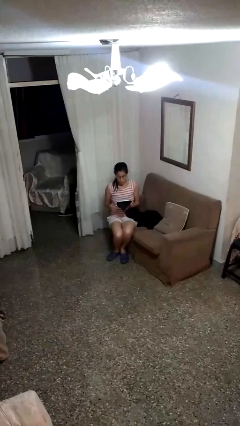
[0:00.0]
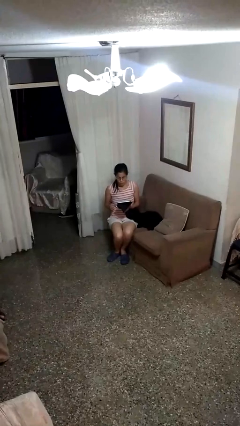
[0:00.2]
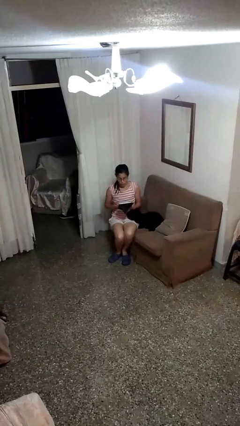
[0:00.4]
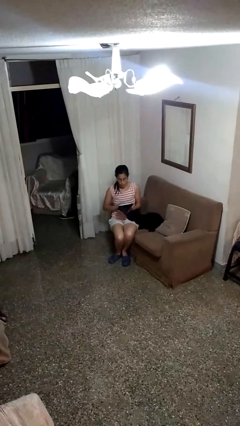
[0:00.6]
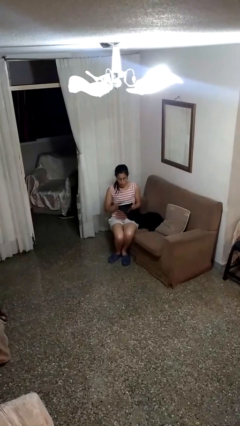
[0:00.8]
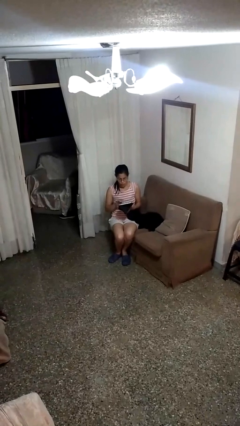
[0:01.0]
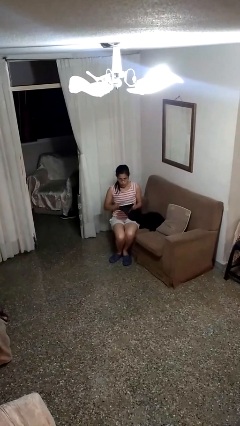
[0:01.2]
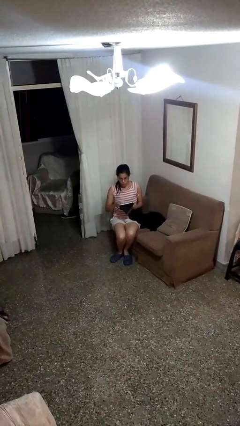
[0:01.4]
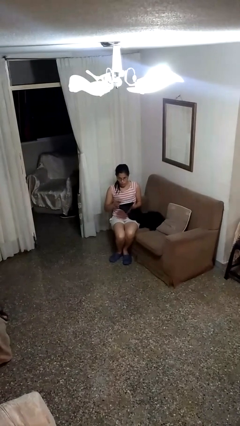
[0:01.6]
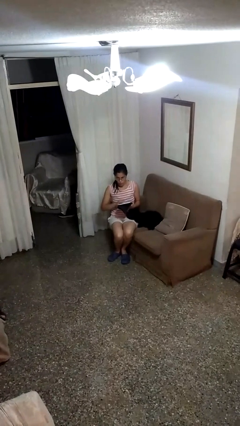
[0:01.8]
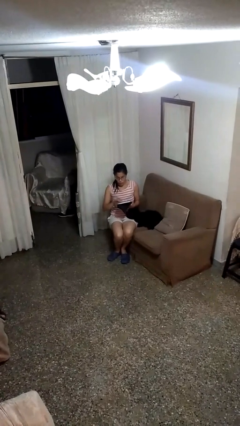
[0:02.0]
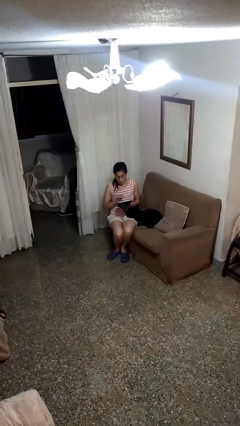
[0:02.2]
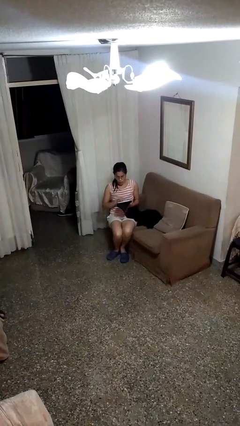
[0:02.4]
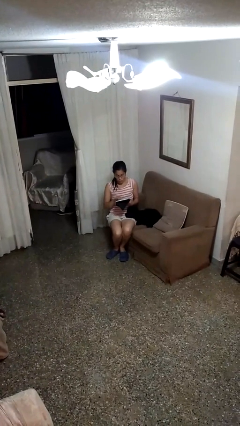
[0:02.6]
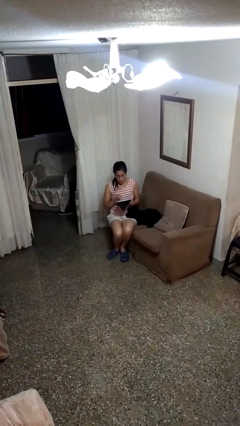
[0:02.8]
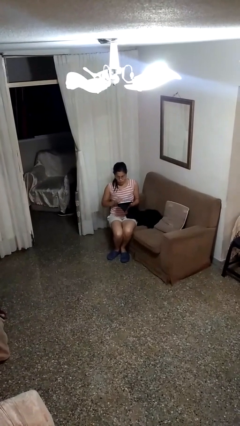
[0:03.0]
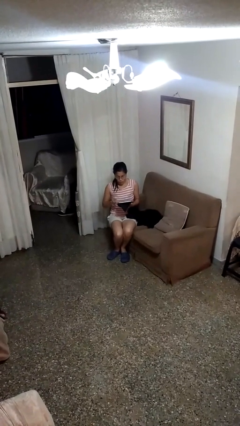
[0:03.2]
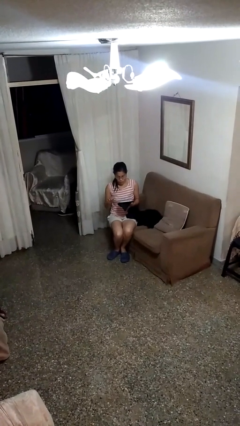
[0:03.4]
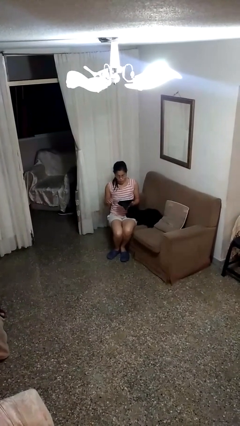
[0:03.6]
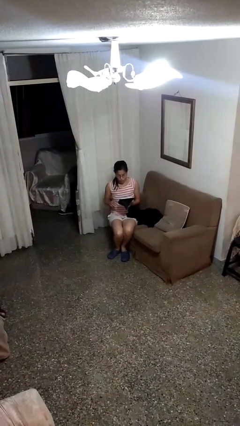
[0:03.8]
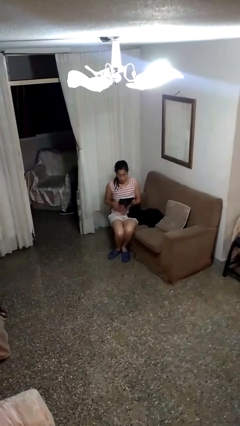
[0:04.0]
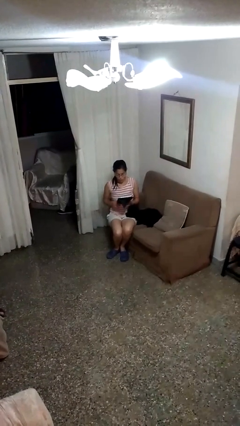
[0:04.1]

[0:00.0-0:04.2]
person interacts with tablet

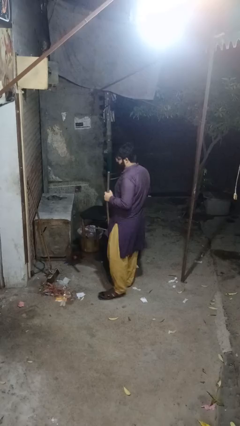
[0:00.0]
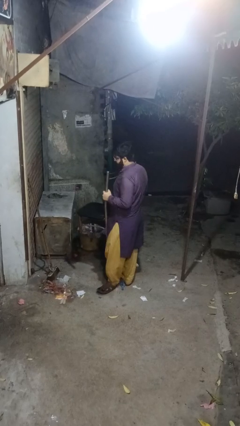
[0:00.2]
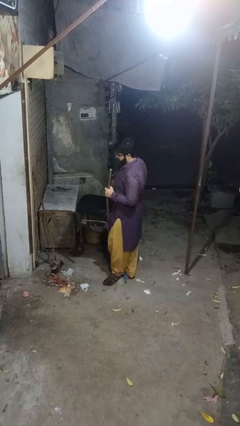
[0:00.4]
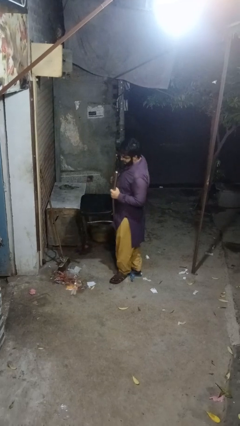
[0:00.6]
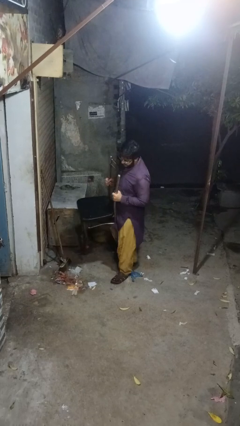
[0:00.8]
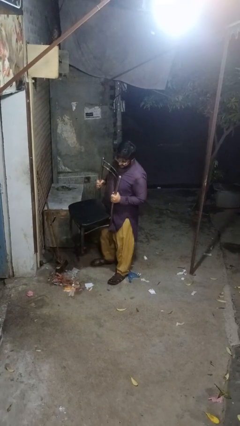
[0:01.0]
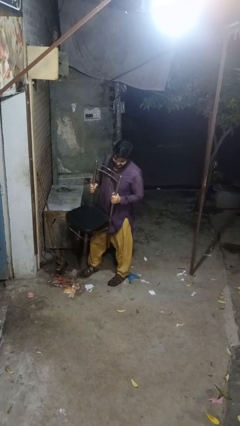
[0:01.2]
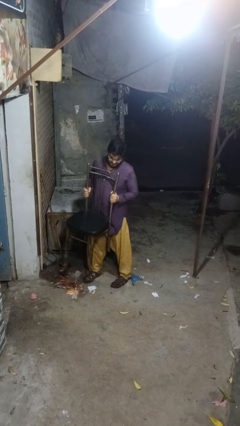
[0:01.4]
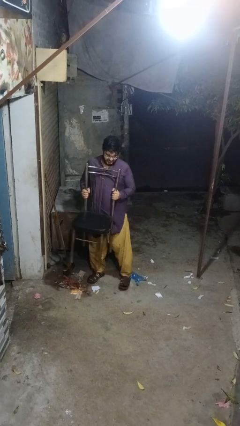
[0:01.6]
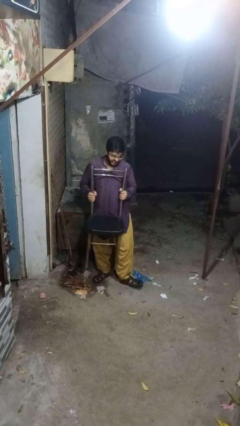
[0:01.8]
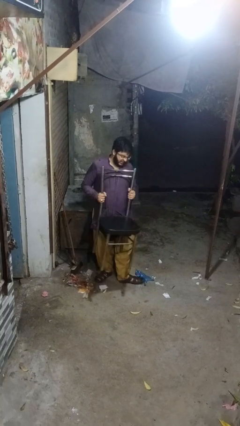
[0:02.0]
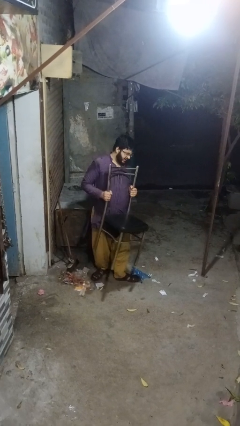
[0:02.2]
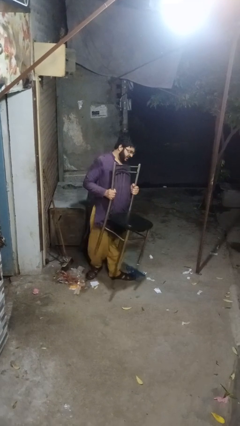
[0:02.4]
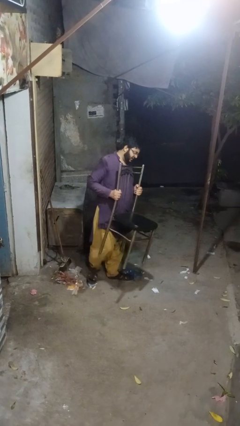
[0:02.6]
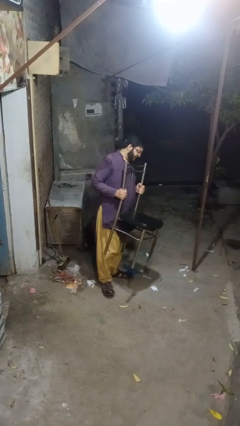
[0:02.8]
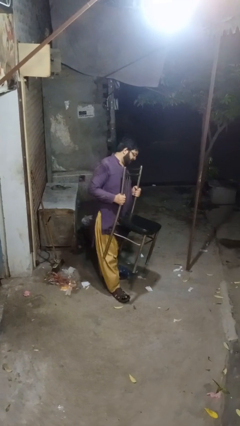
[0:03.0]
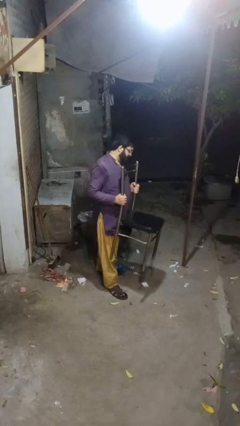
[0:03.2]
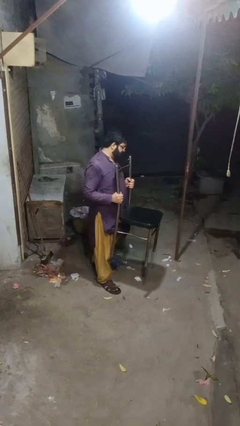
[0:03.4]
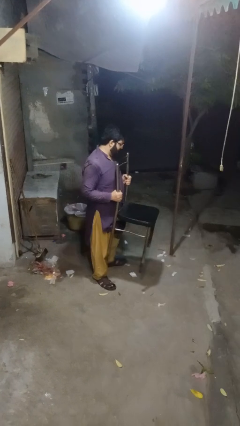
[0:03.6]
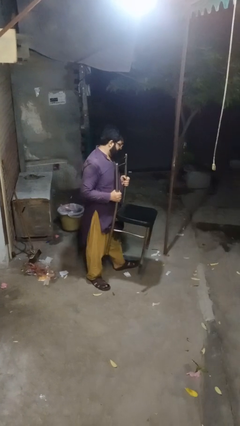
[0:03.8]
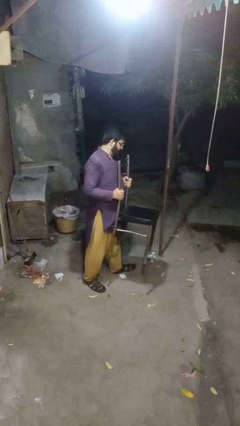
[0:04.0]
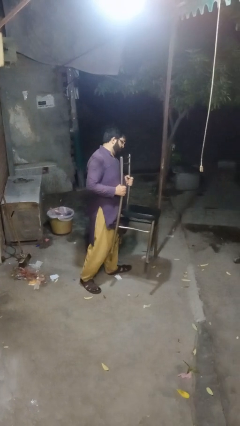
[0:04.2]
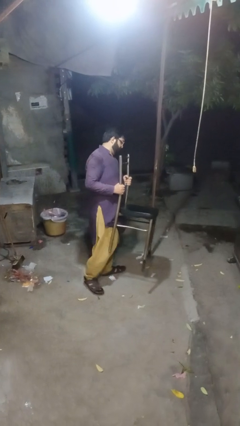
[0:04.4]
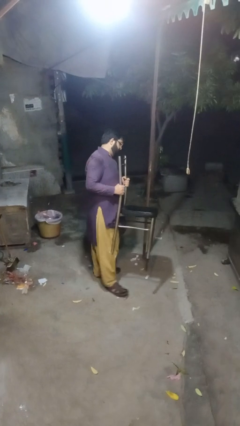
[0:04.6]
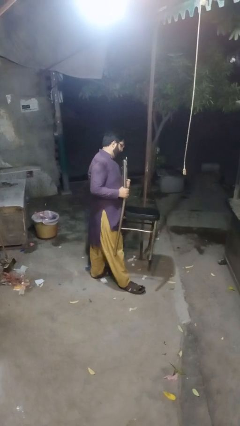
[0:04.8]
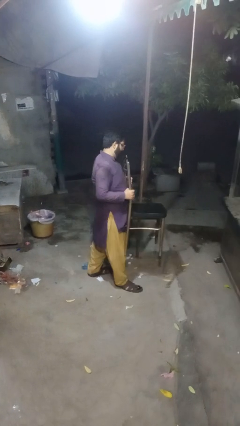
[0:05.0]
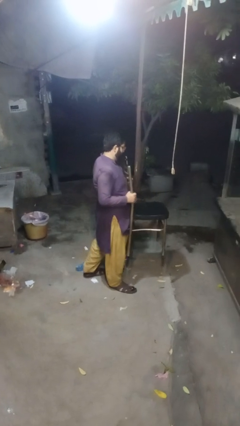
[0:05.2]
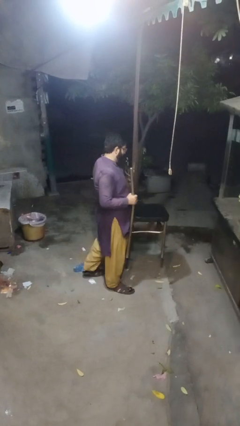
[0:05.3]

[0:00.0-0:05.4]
person carries furniture

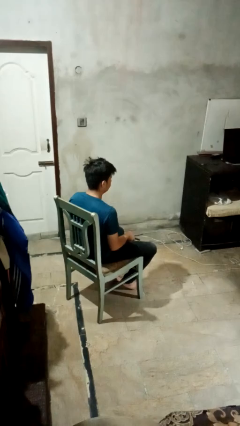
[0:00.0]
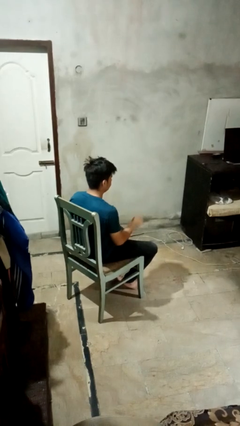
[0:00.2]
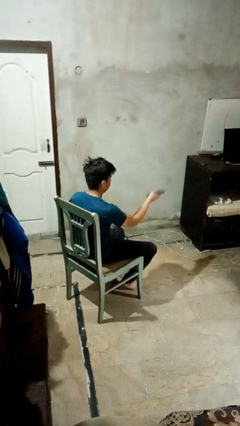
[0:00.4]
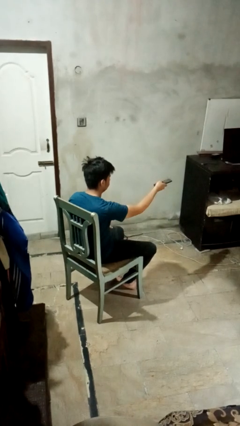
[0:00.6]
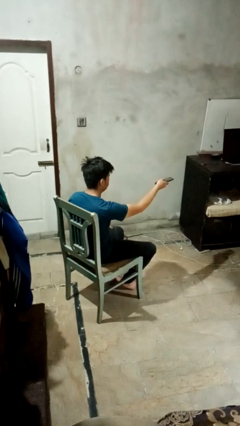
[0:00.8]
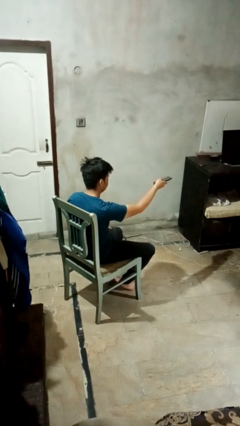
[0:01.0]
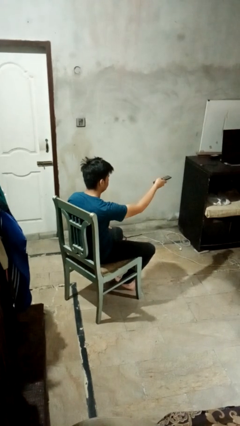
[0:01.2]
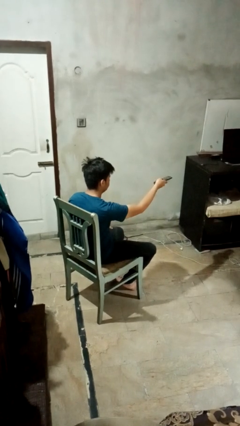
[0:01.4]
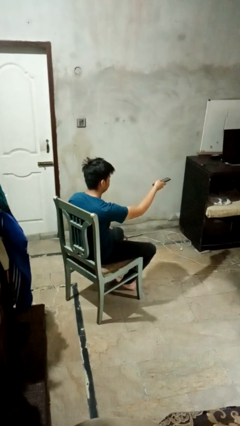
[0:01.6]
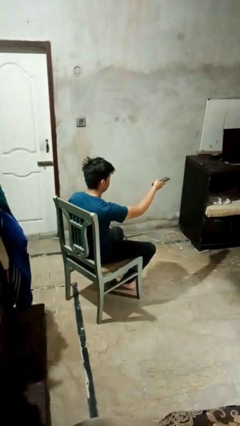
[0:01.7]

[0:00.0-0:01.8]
person uses television remote

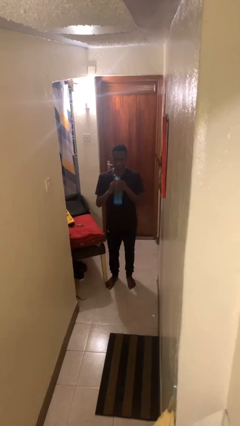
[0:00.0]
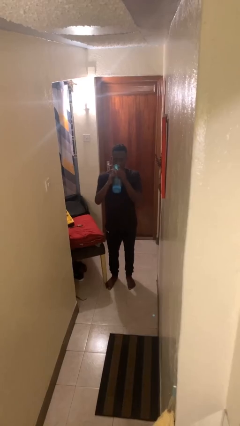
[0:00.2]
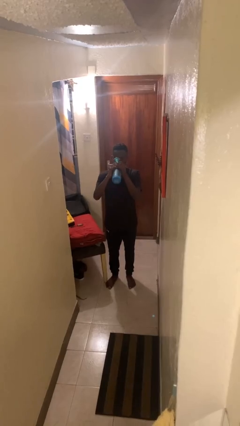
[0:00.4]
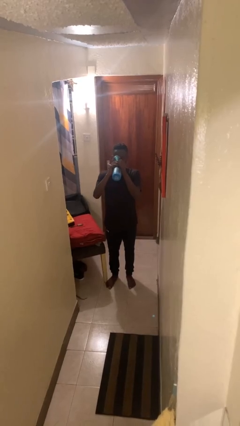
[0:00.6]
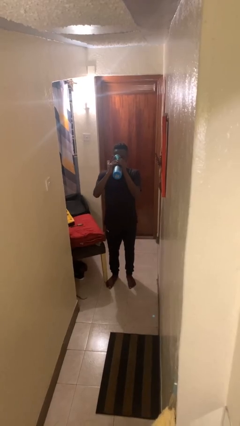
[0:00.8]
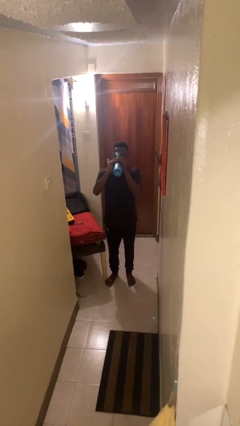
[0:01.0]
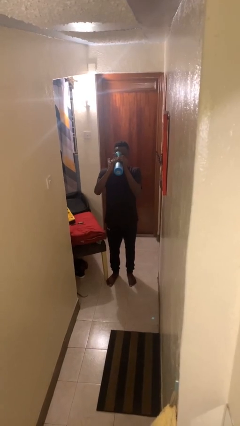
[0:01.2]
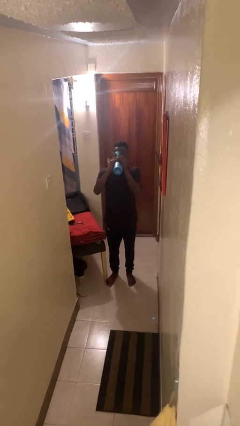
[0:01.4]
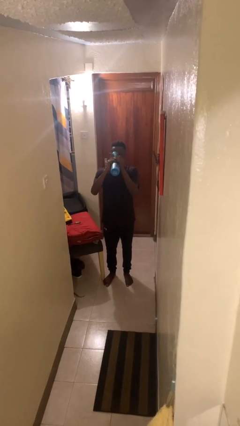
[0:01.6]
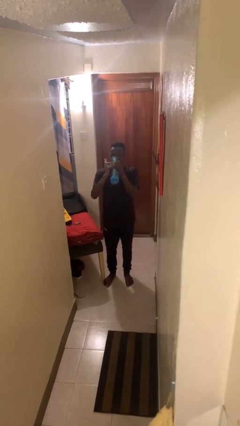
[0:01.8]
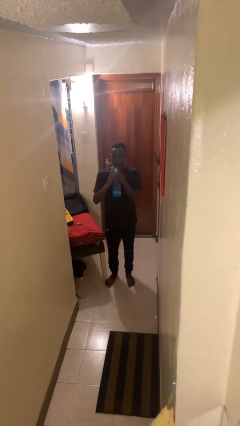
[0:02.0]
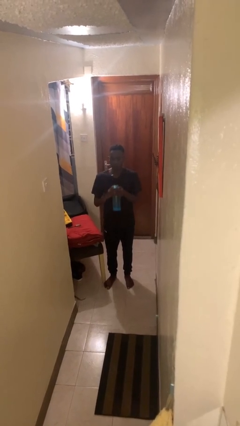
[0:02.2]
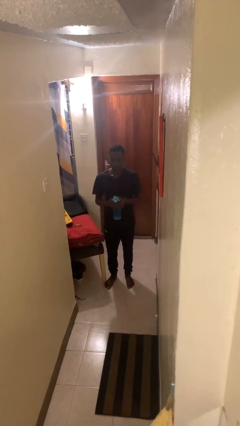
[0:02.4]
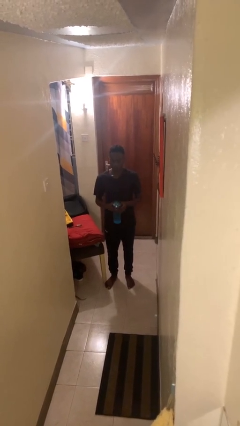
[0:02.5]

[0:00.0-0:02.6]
person drinks from bottle

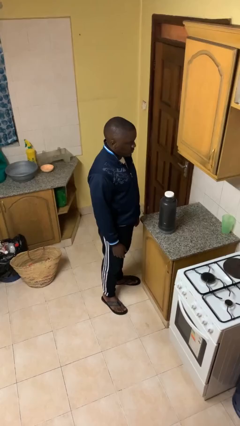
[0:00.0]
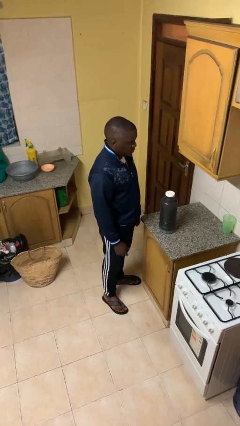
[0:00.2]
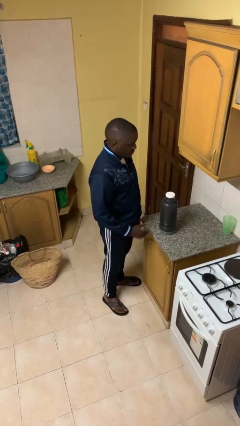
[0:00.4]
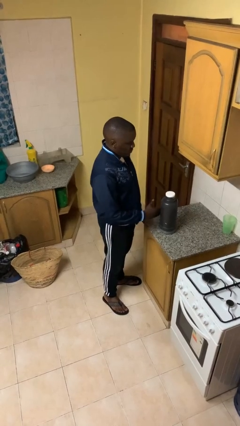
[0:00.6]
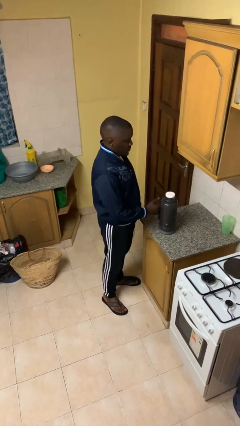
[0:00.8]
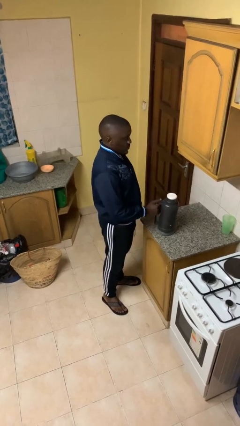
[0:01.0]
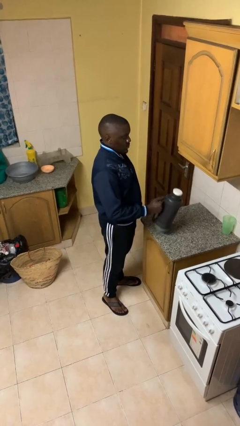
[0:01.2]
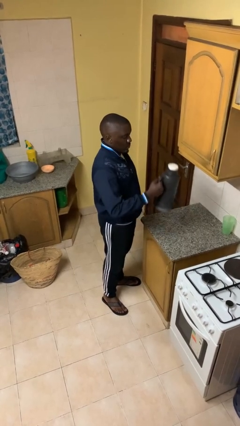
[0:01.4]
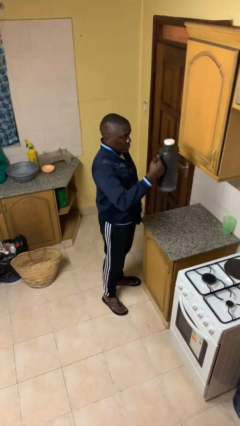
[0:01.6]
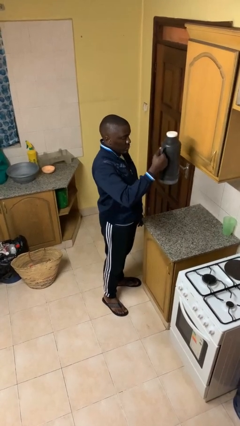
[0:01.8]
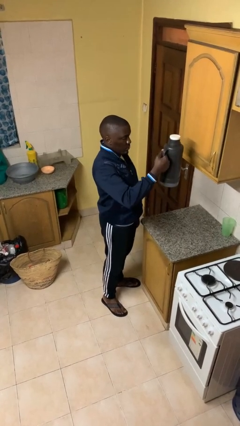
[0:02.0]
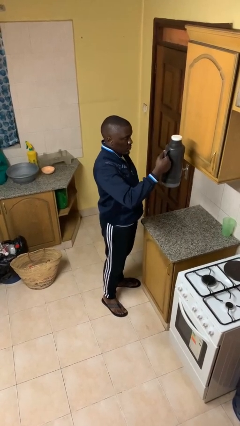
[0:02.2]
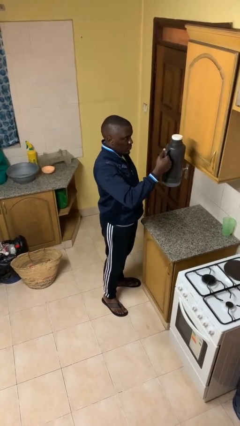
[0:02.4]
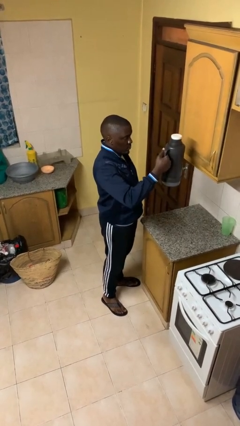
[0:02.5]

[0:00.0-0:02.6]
person picks up object from countertop

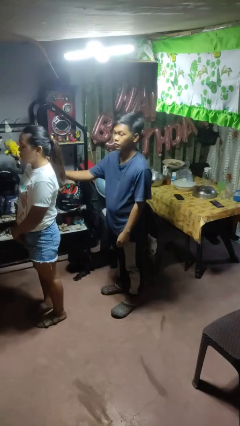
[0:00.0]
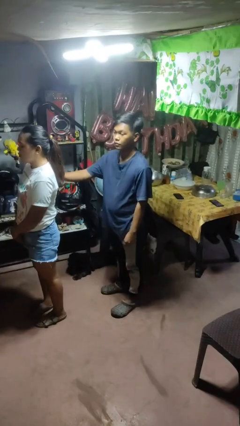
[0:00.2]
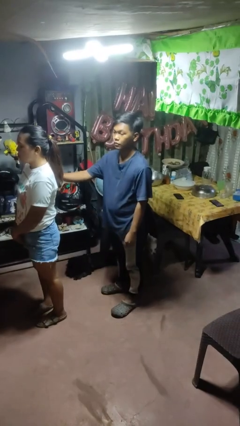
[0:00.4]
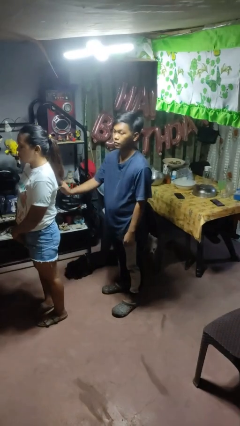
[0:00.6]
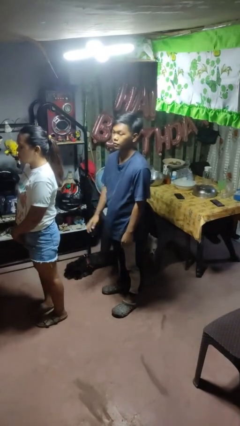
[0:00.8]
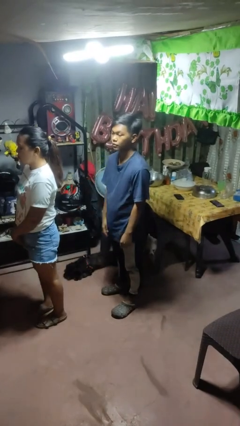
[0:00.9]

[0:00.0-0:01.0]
person touches back of person
